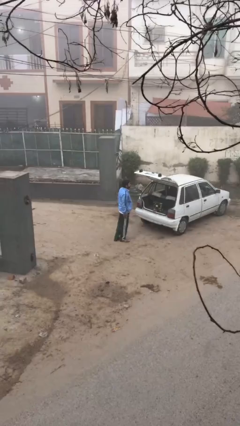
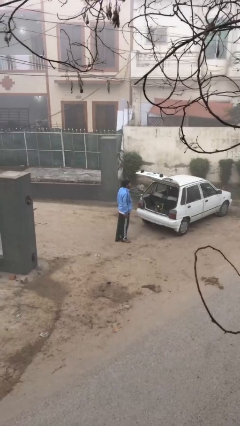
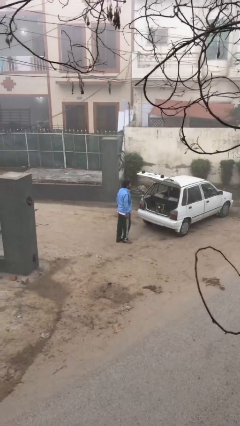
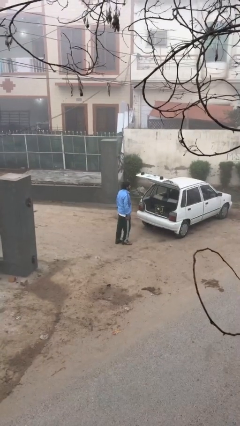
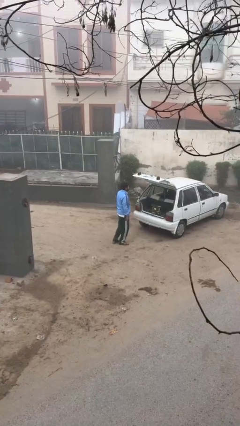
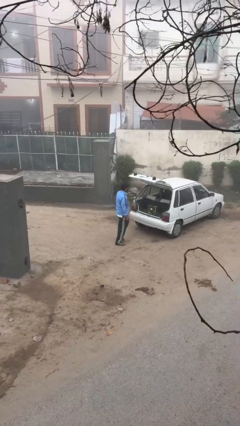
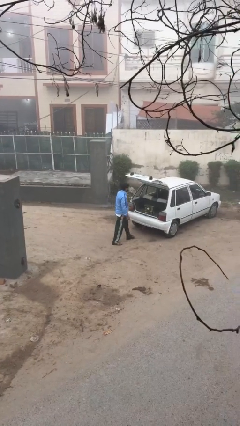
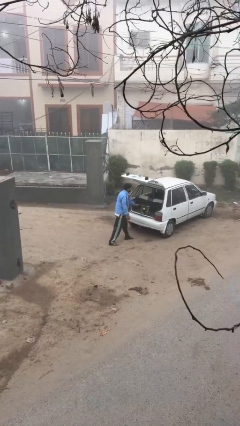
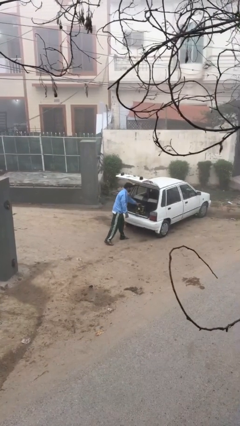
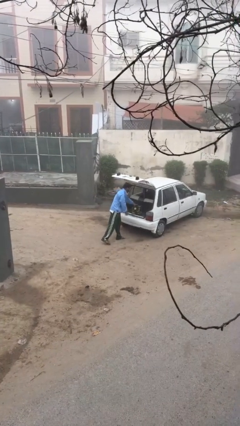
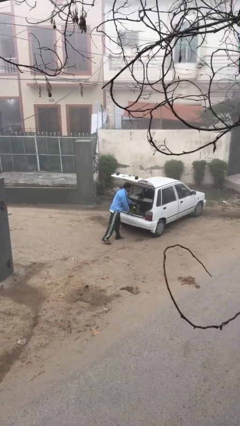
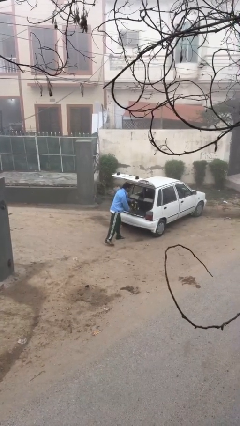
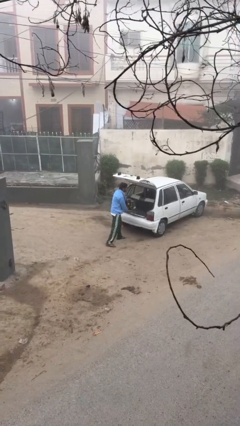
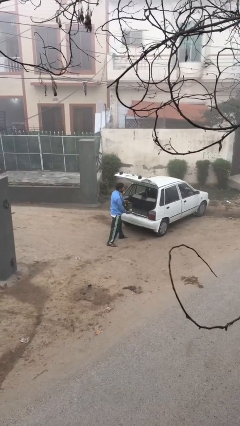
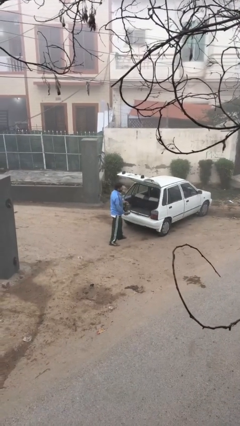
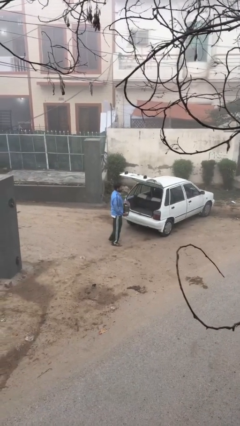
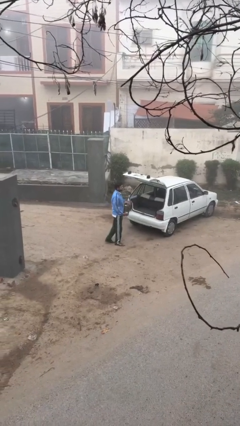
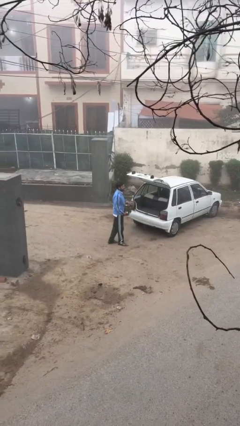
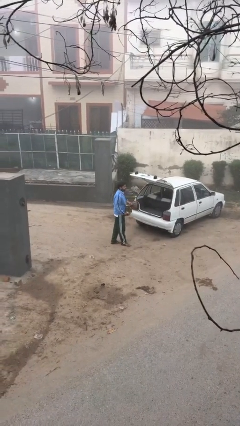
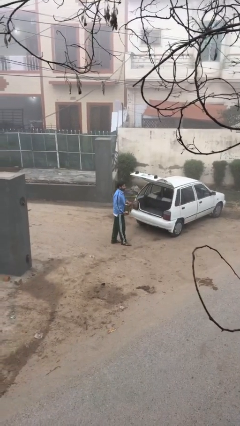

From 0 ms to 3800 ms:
person unloads car

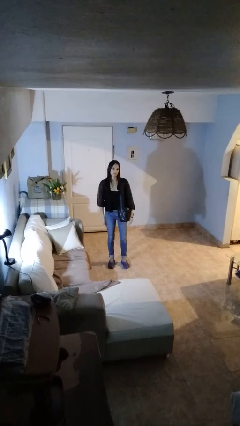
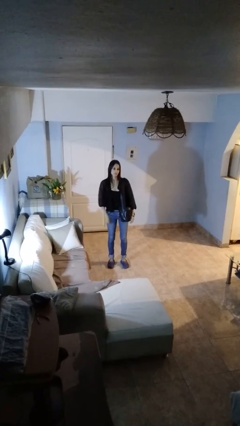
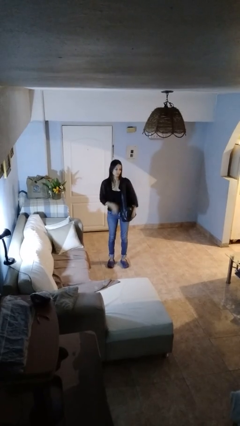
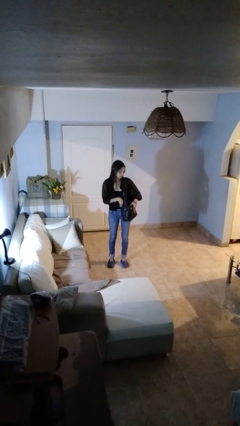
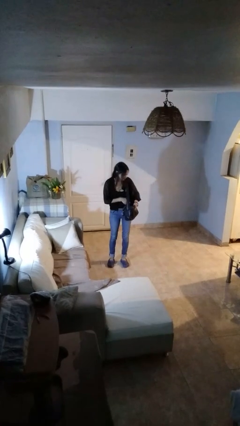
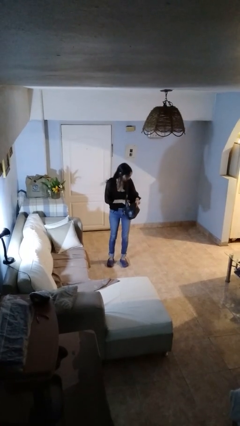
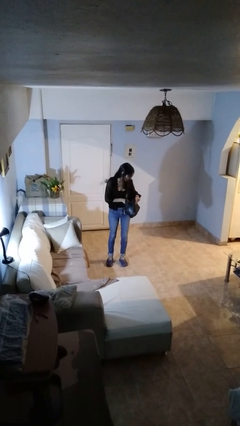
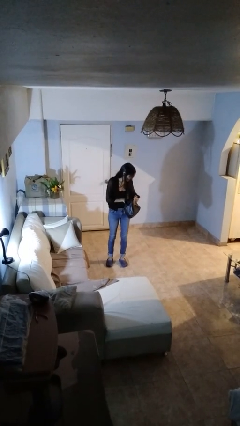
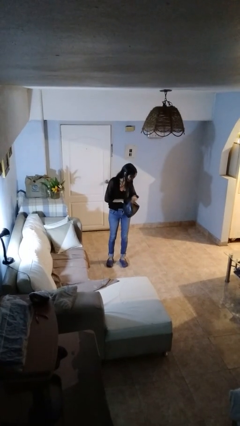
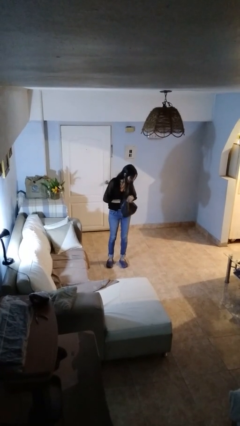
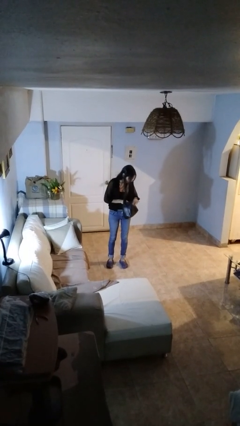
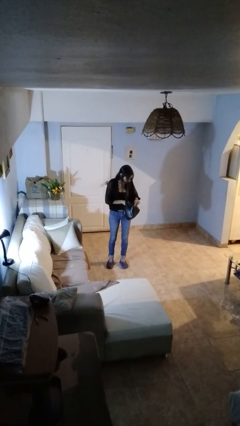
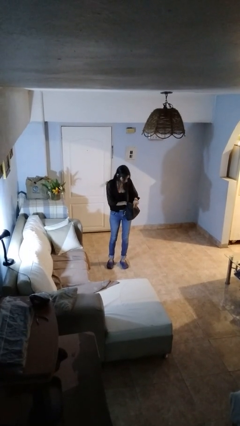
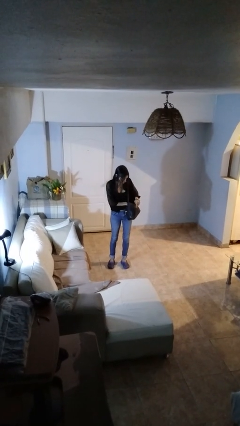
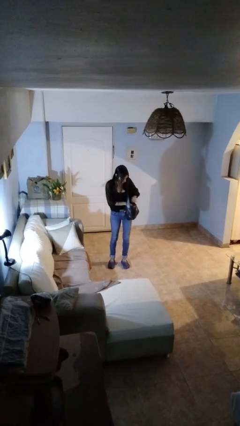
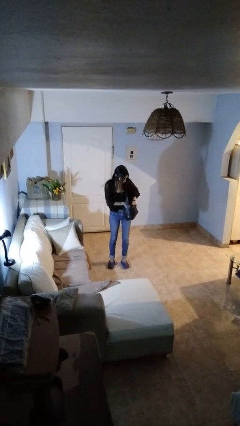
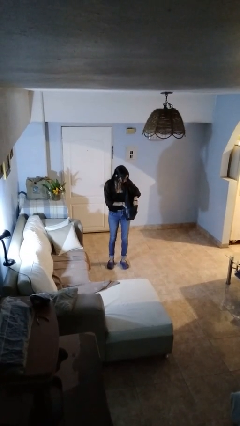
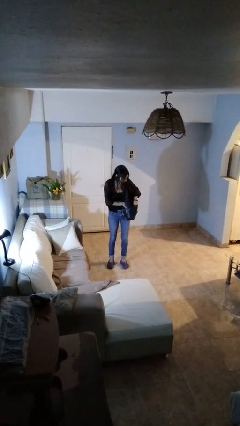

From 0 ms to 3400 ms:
person searches in purse

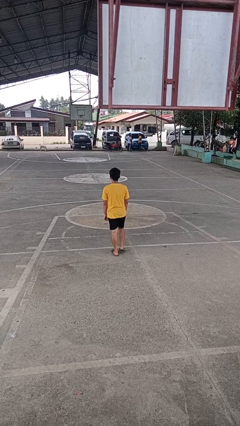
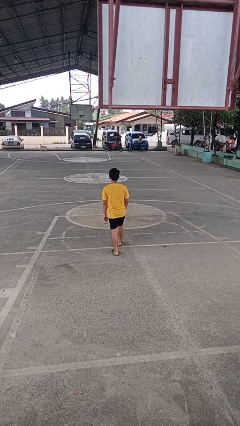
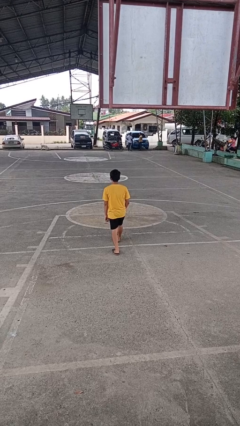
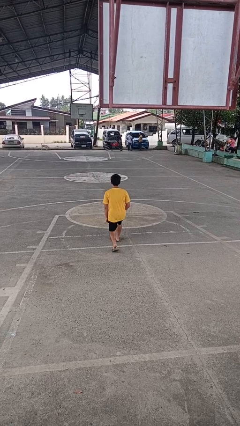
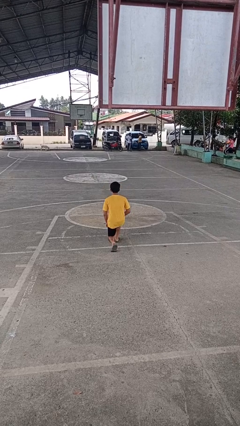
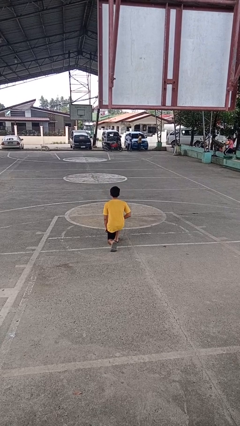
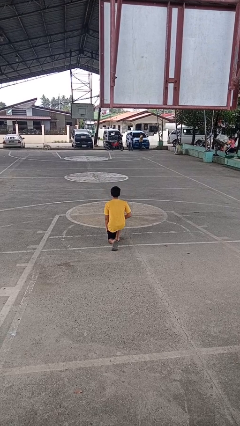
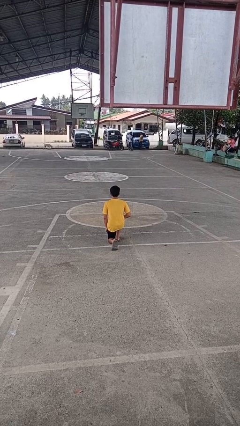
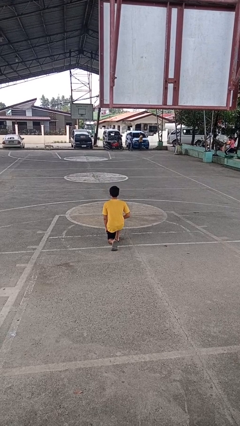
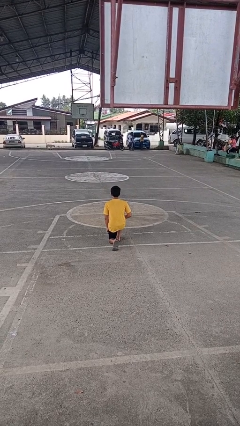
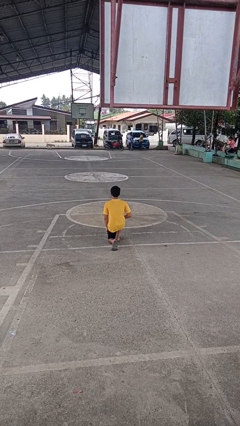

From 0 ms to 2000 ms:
person kneels

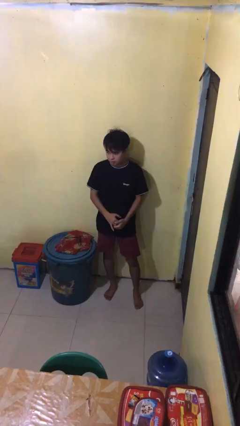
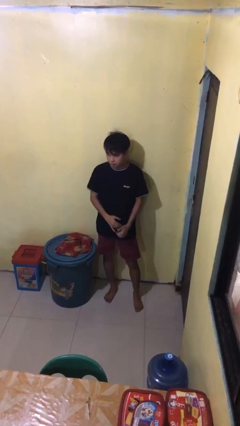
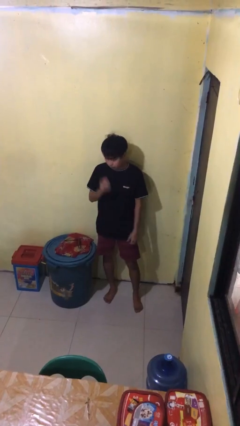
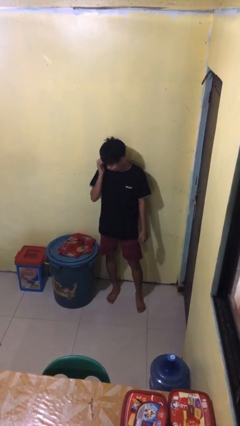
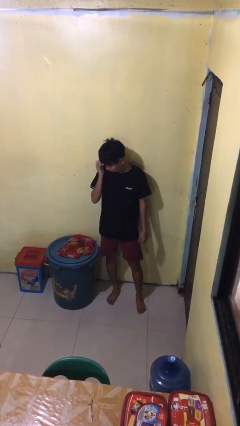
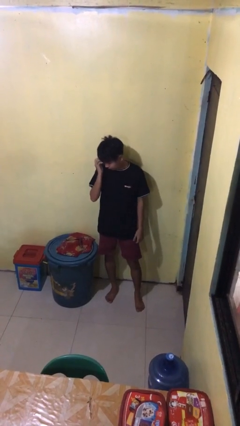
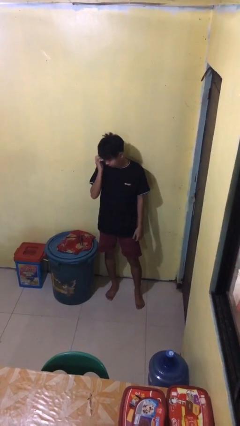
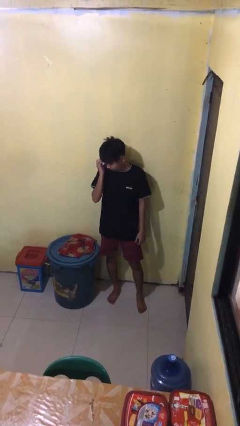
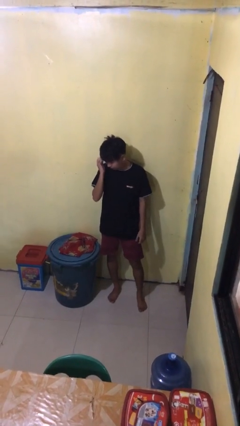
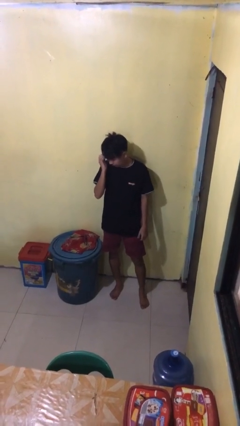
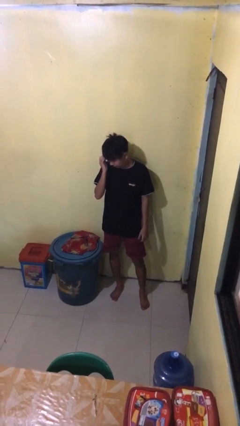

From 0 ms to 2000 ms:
person scratches face

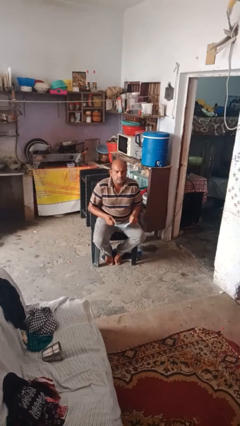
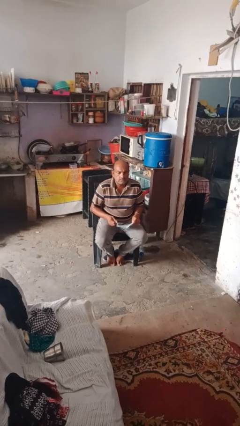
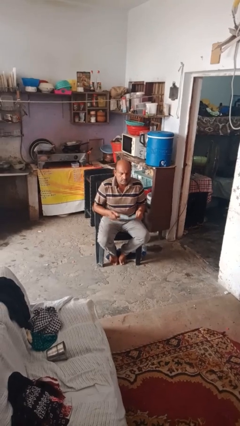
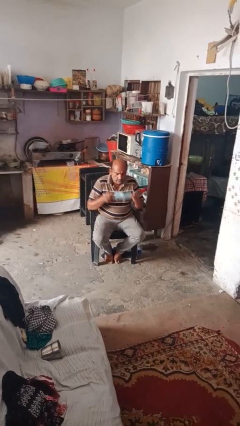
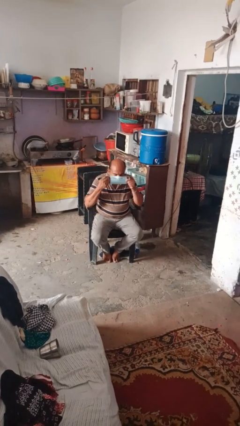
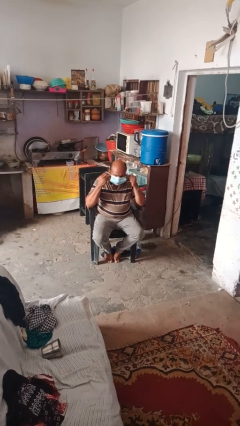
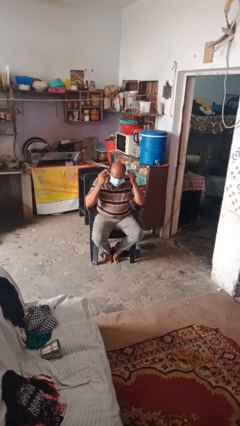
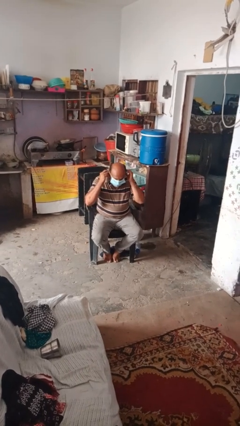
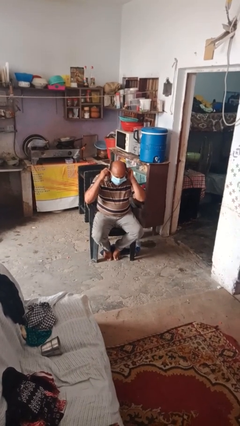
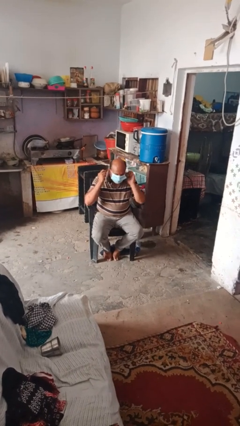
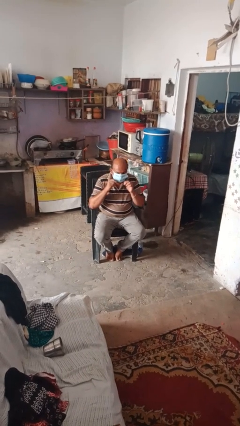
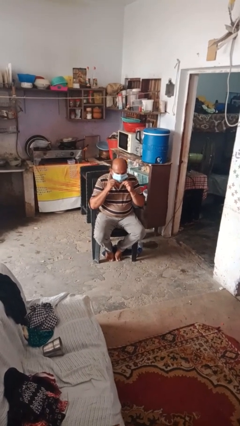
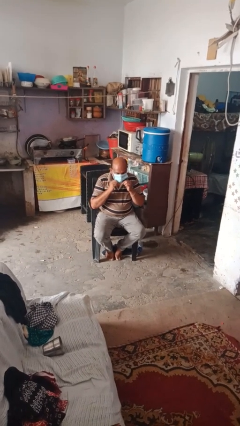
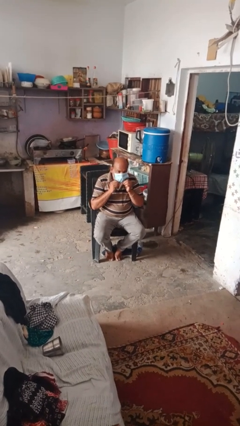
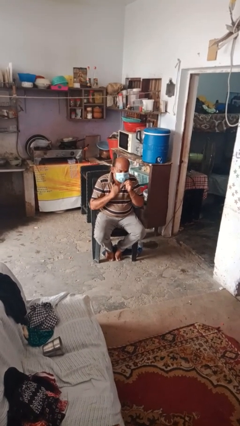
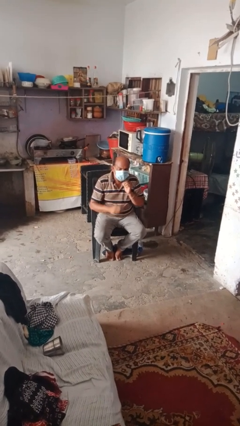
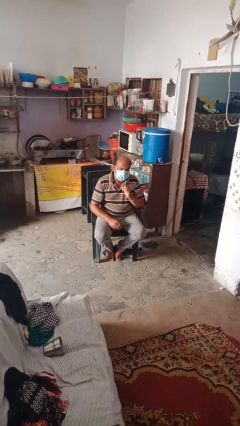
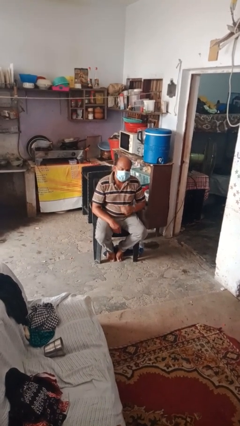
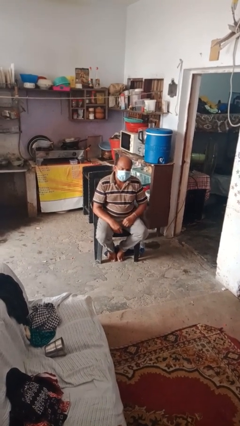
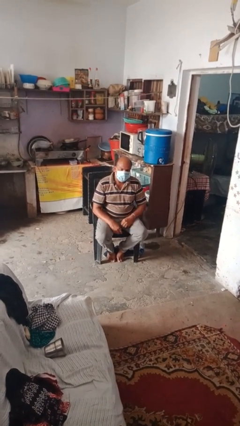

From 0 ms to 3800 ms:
person puts on facemask

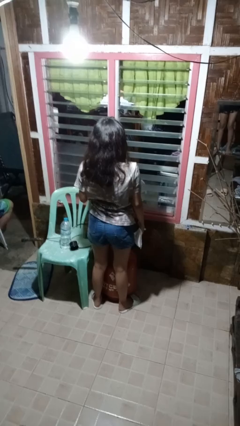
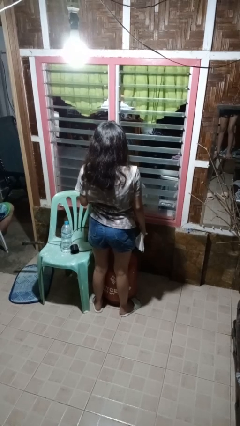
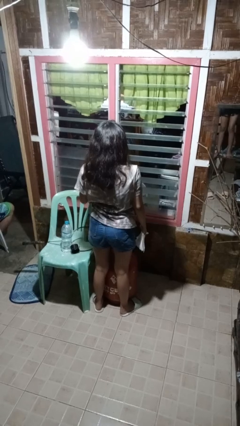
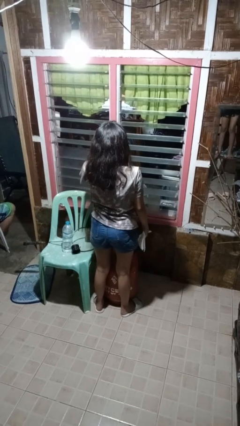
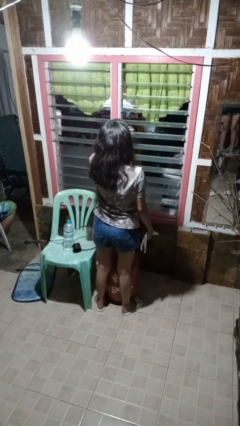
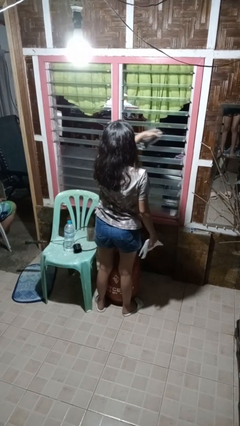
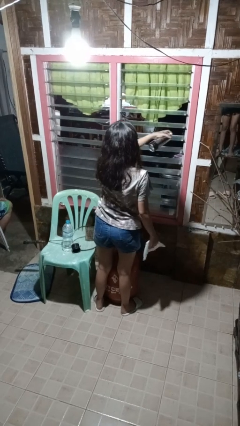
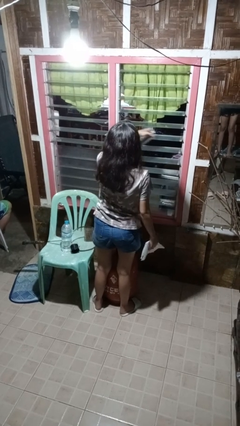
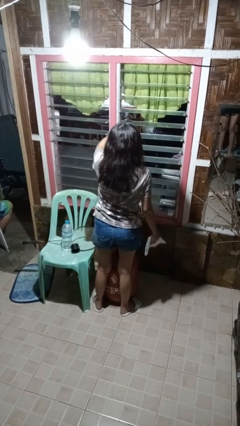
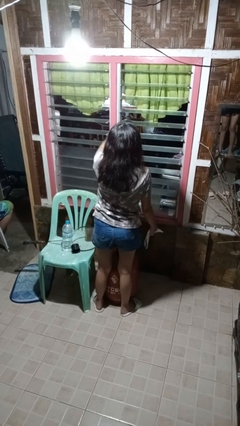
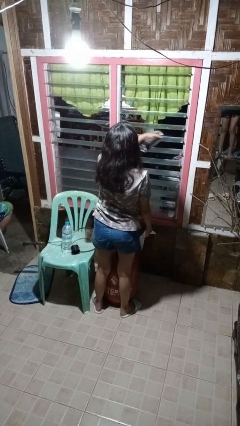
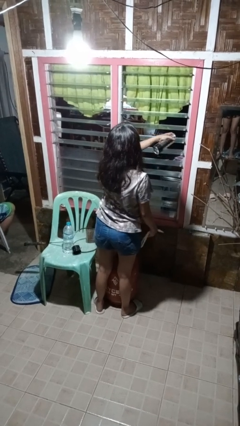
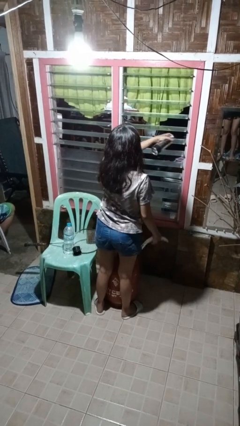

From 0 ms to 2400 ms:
person sprays from bottle
